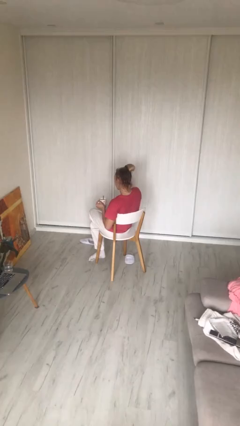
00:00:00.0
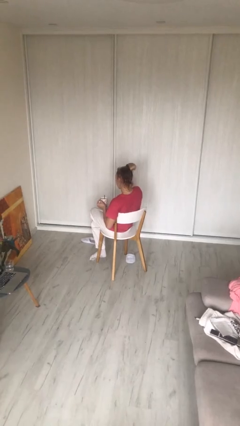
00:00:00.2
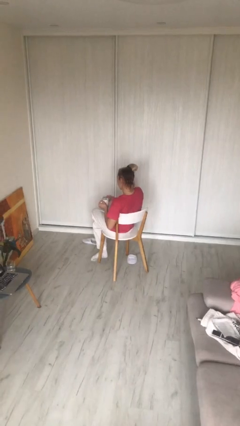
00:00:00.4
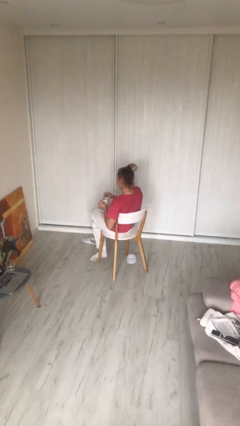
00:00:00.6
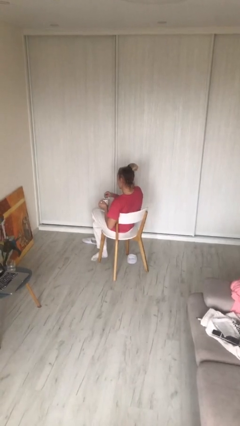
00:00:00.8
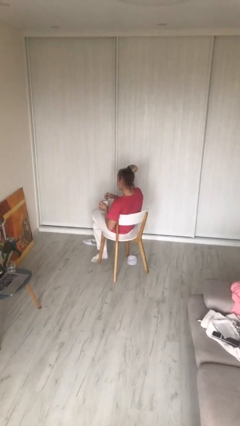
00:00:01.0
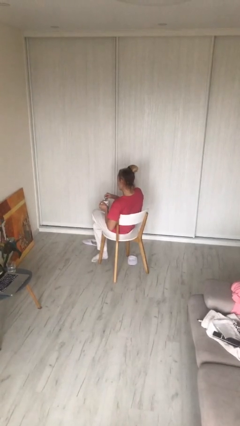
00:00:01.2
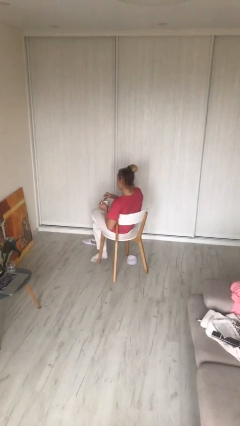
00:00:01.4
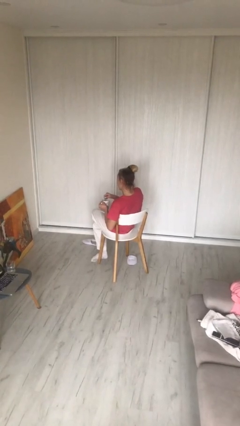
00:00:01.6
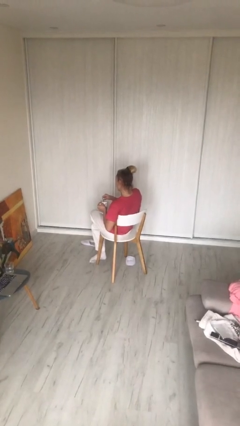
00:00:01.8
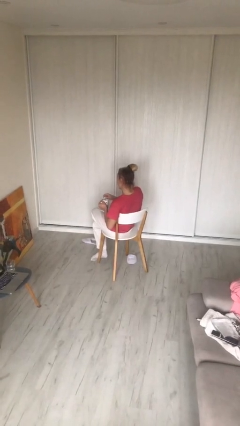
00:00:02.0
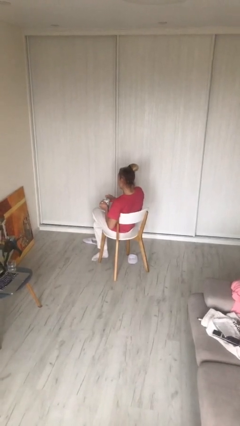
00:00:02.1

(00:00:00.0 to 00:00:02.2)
person stirs mug

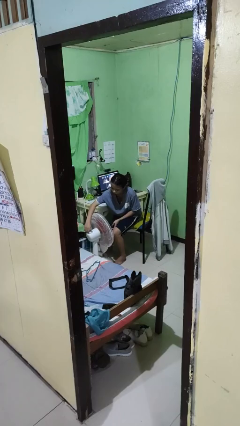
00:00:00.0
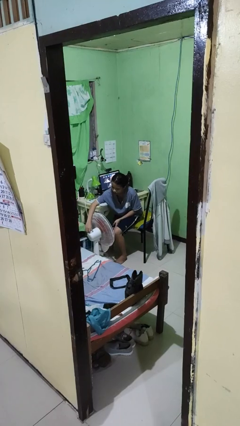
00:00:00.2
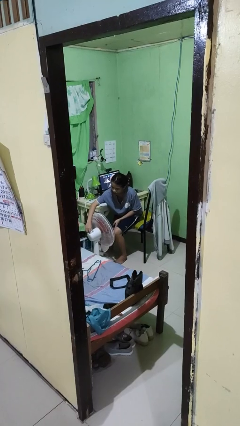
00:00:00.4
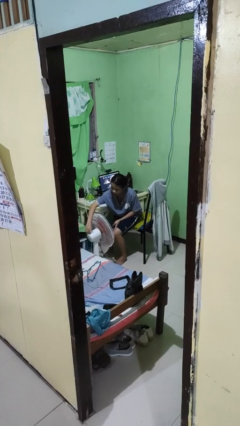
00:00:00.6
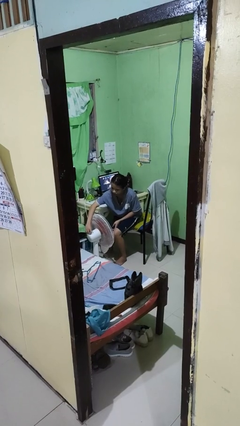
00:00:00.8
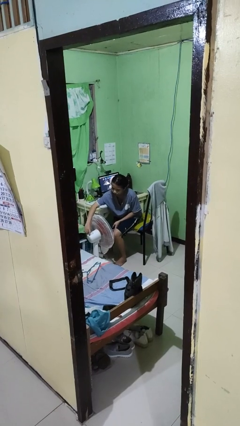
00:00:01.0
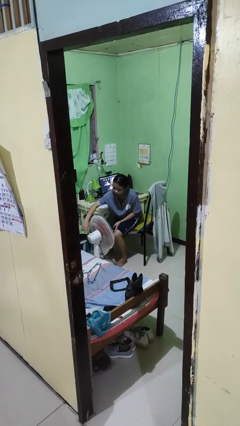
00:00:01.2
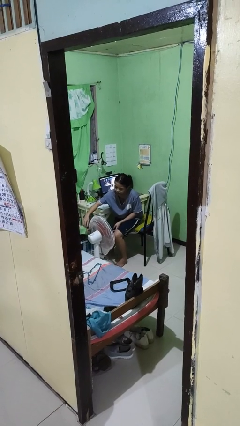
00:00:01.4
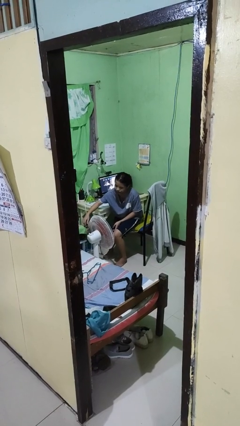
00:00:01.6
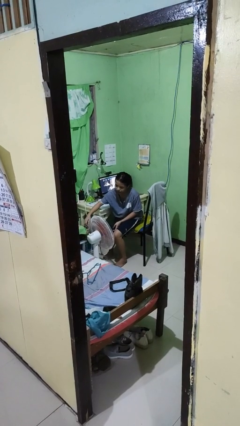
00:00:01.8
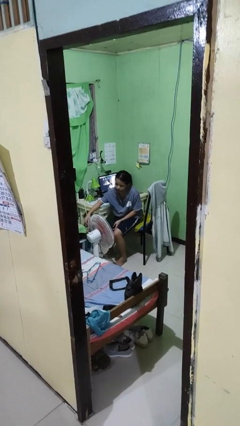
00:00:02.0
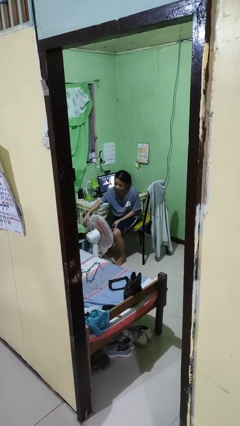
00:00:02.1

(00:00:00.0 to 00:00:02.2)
person turns off fan

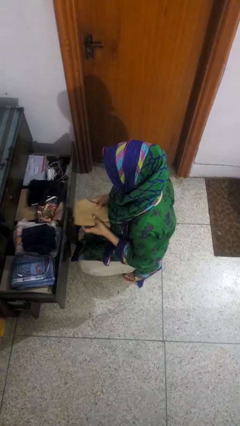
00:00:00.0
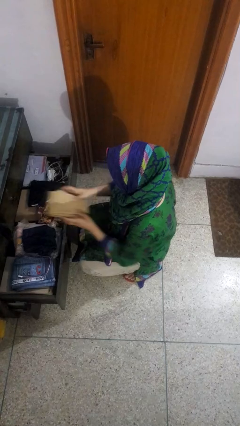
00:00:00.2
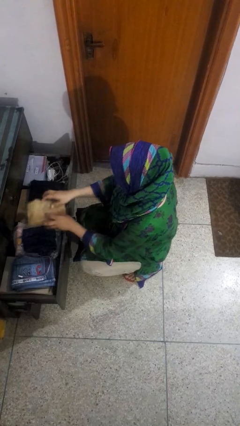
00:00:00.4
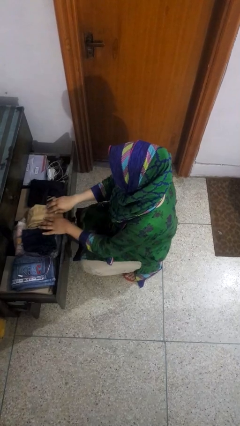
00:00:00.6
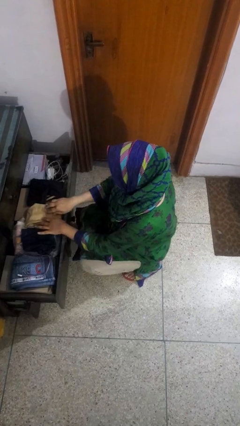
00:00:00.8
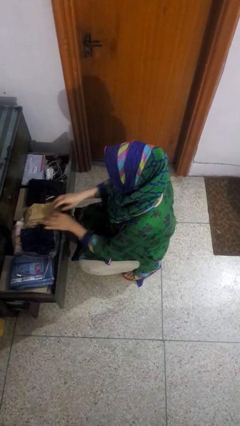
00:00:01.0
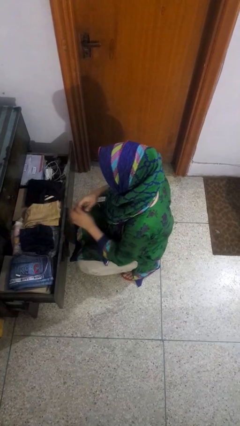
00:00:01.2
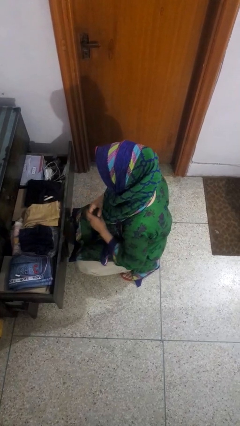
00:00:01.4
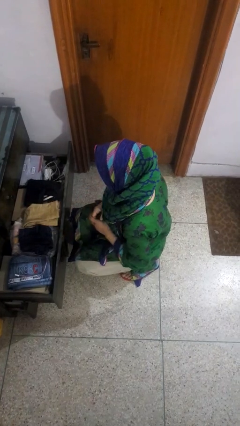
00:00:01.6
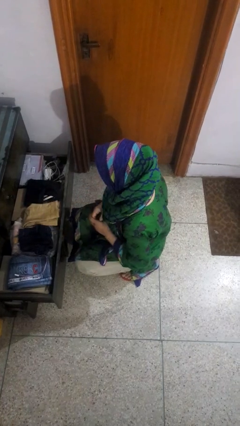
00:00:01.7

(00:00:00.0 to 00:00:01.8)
person puts clothes into dresser

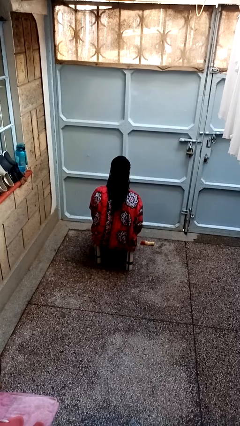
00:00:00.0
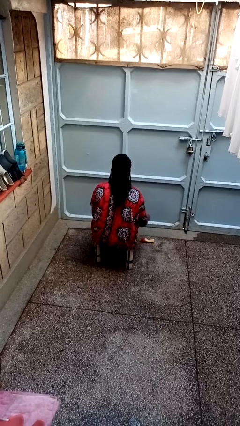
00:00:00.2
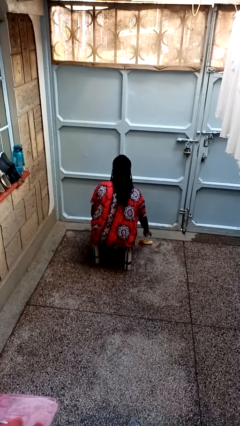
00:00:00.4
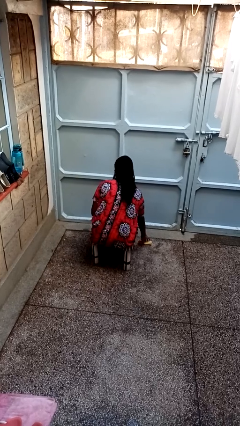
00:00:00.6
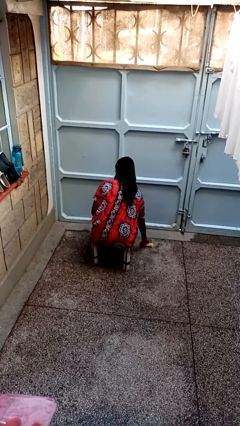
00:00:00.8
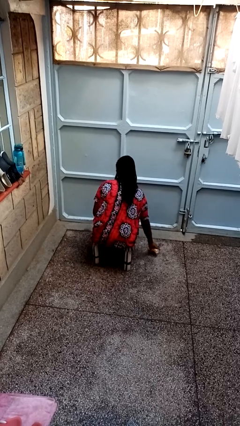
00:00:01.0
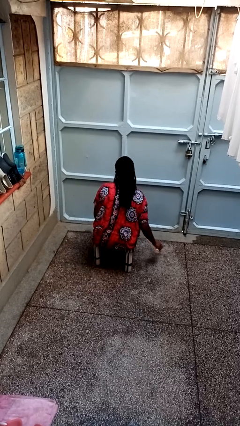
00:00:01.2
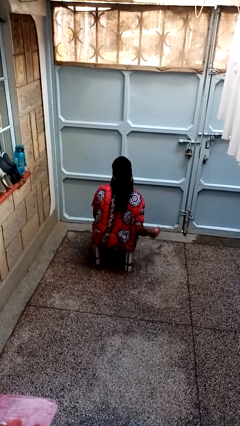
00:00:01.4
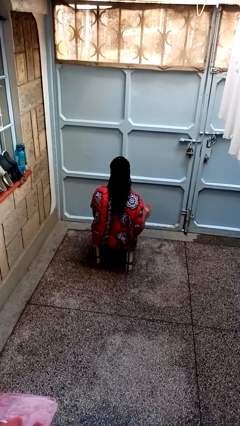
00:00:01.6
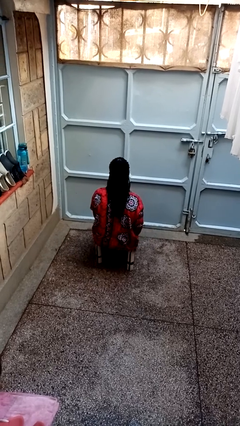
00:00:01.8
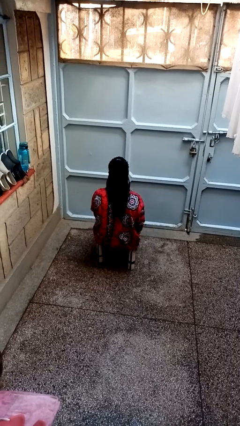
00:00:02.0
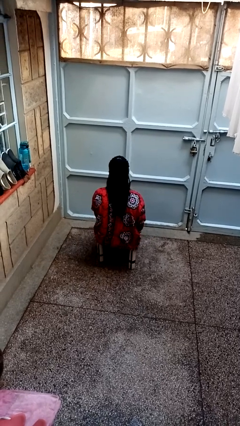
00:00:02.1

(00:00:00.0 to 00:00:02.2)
person picks up object from floor

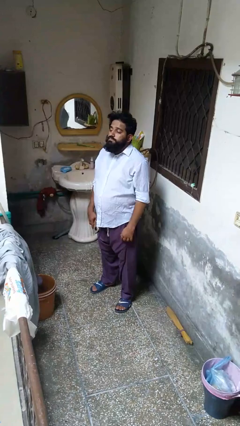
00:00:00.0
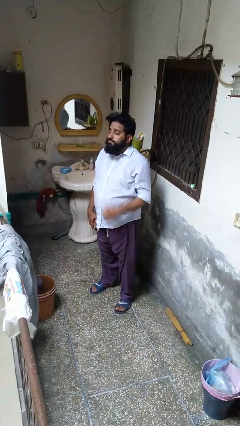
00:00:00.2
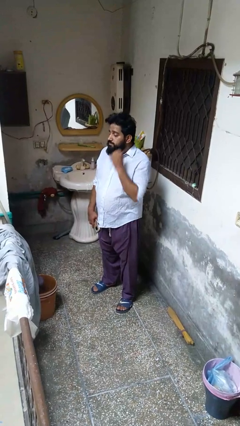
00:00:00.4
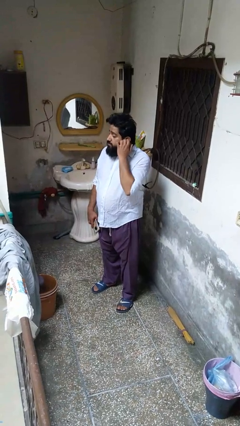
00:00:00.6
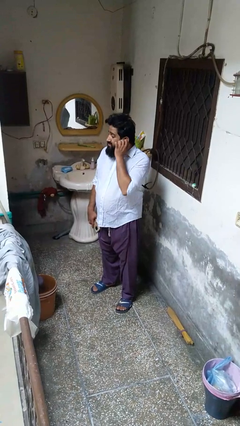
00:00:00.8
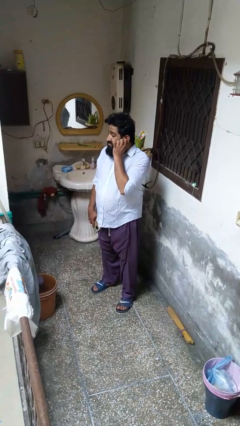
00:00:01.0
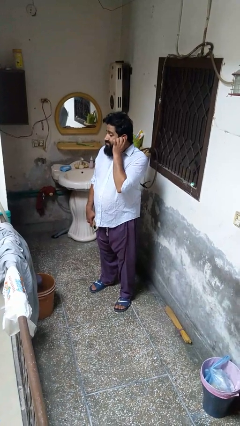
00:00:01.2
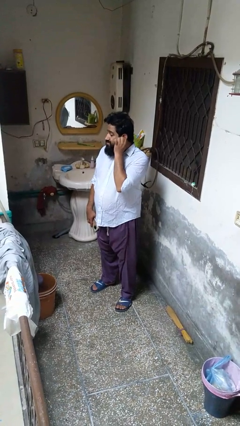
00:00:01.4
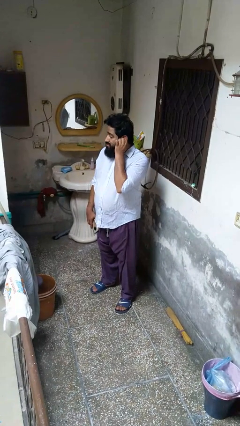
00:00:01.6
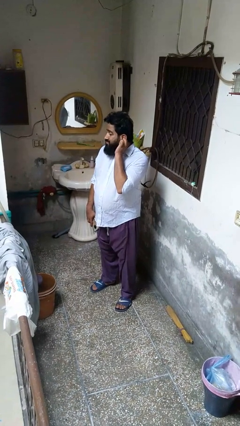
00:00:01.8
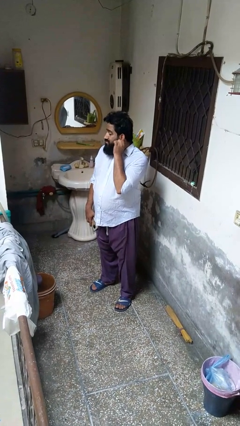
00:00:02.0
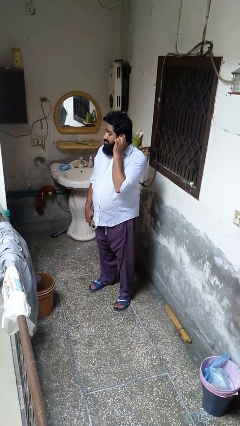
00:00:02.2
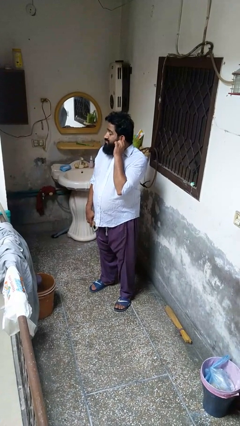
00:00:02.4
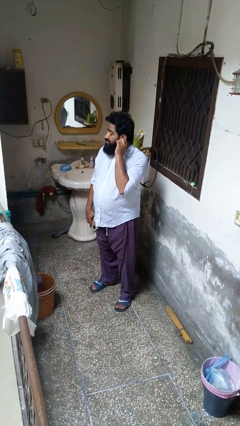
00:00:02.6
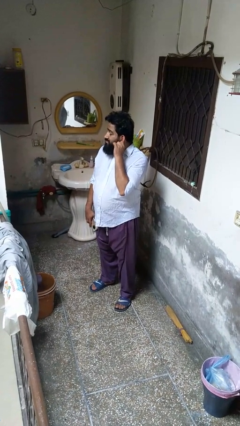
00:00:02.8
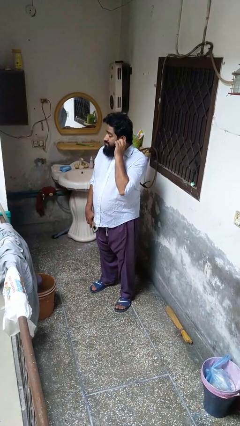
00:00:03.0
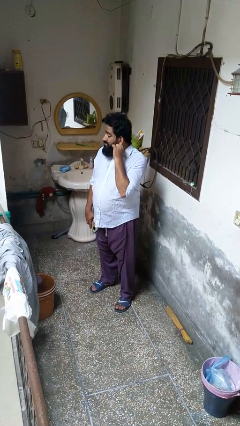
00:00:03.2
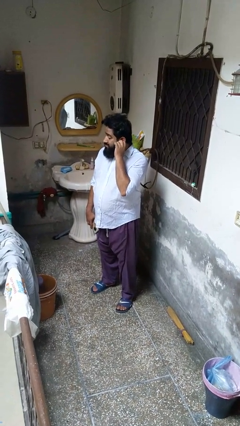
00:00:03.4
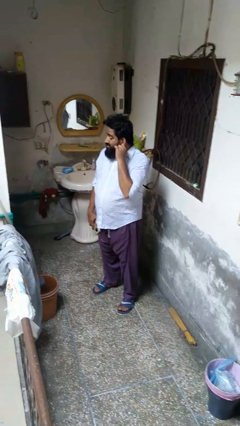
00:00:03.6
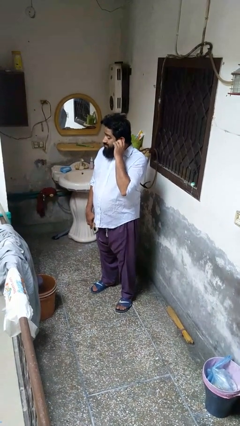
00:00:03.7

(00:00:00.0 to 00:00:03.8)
person touches earlobe

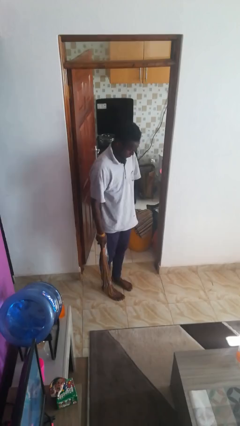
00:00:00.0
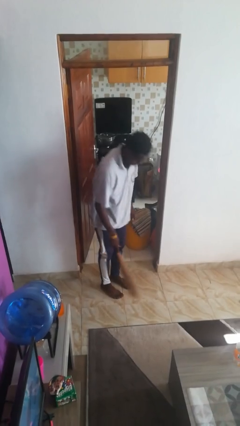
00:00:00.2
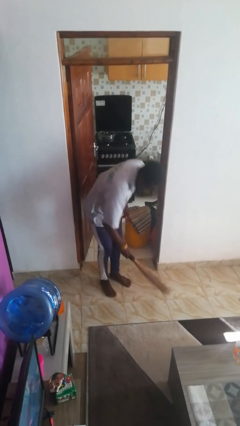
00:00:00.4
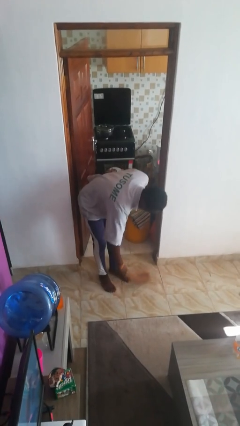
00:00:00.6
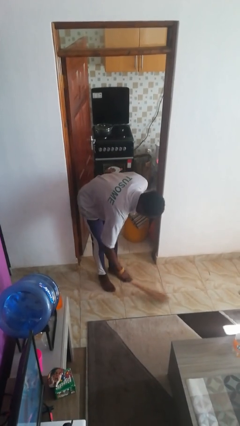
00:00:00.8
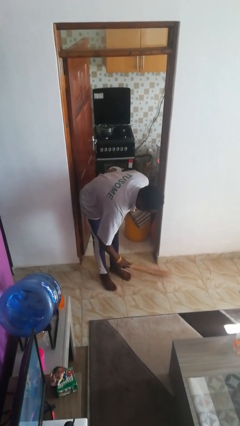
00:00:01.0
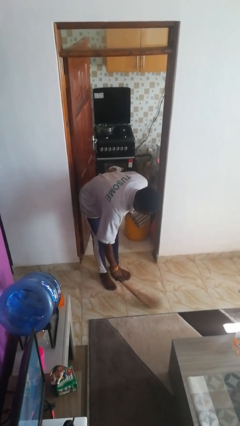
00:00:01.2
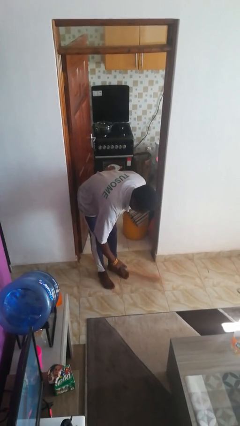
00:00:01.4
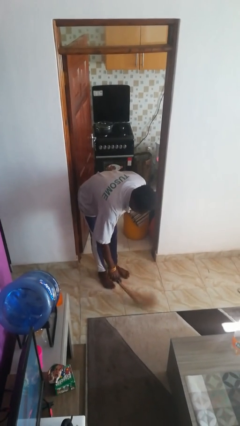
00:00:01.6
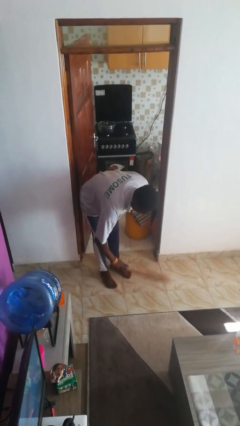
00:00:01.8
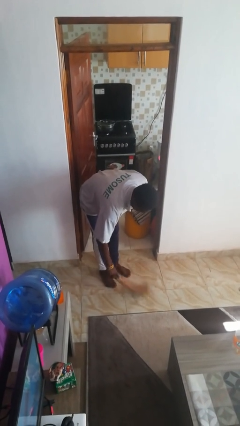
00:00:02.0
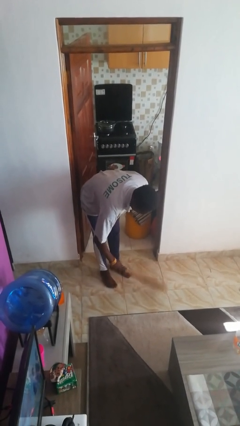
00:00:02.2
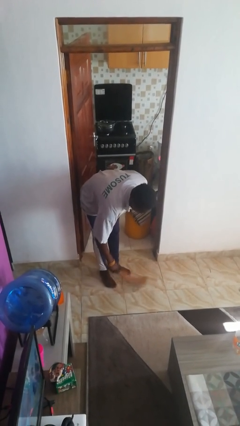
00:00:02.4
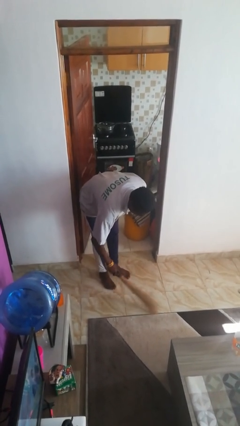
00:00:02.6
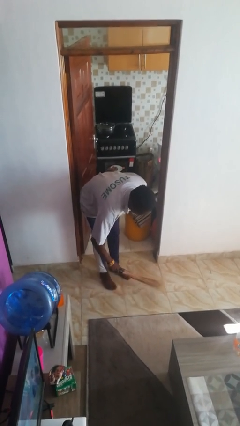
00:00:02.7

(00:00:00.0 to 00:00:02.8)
person sweeps floor

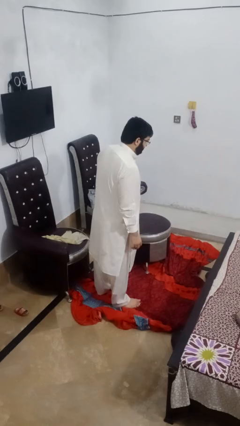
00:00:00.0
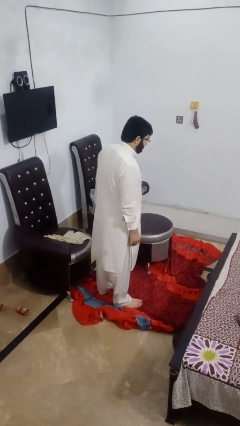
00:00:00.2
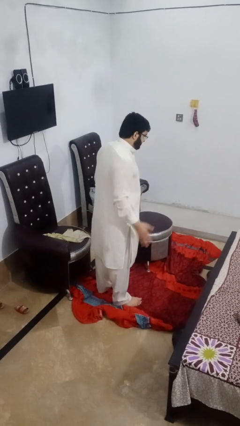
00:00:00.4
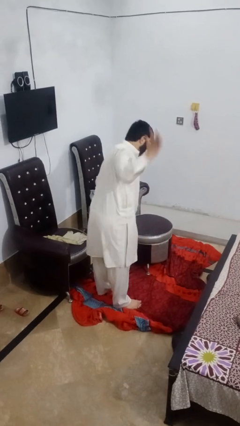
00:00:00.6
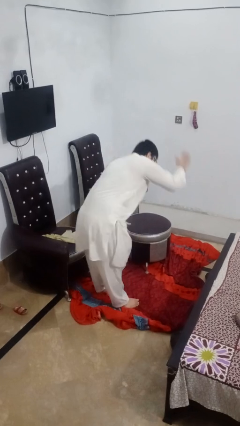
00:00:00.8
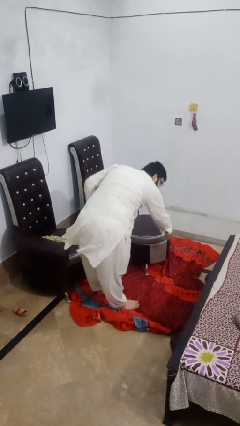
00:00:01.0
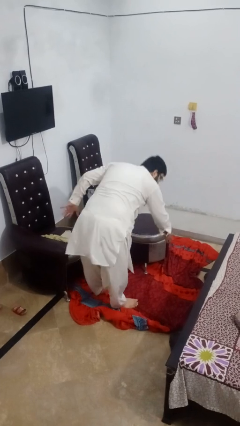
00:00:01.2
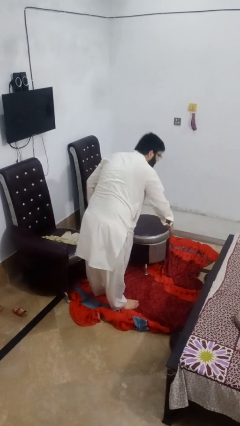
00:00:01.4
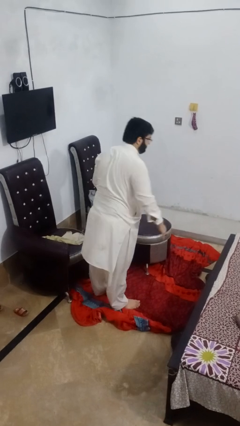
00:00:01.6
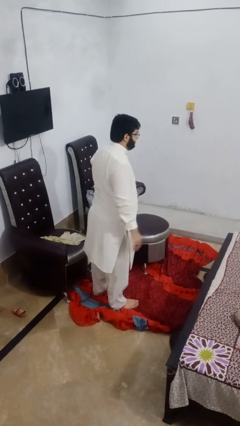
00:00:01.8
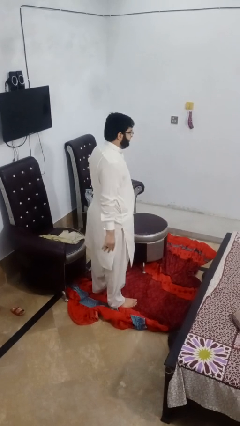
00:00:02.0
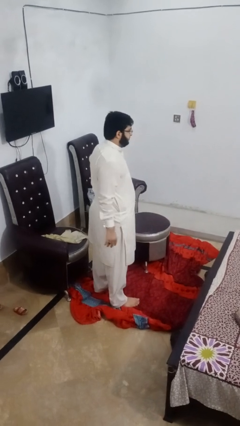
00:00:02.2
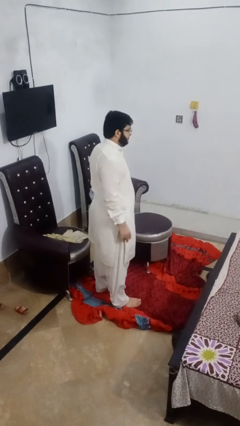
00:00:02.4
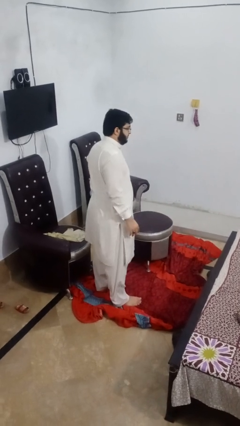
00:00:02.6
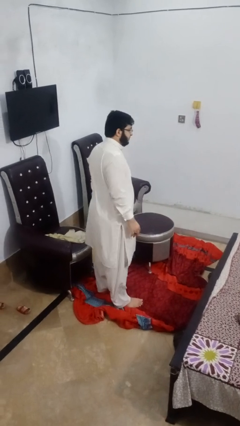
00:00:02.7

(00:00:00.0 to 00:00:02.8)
person karate chop
